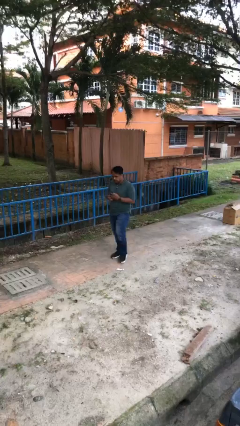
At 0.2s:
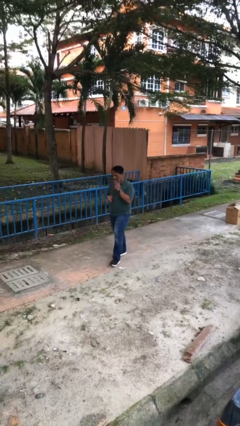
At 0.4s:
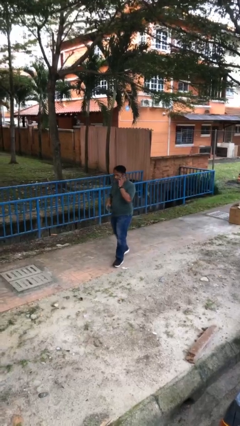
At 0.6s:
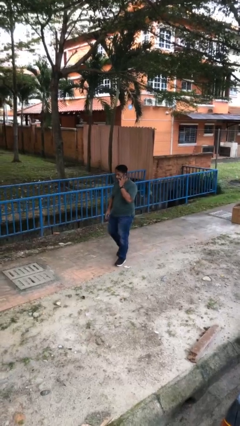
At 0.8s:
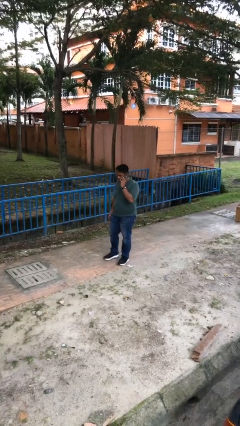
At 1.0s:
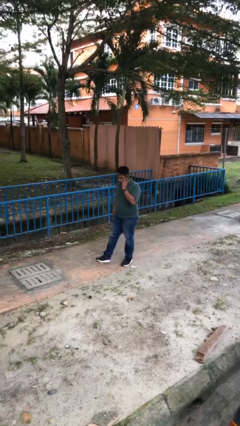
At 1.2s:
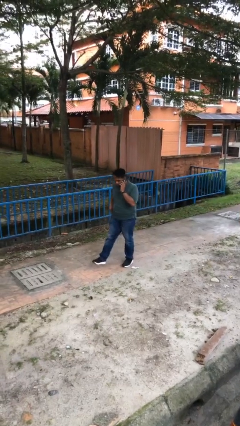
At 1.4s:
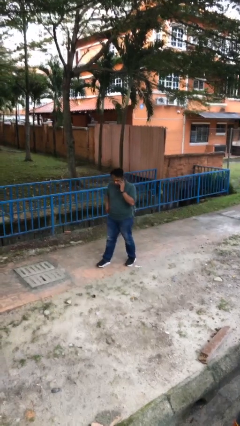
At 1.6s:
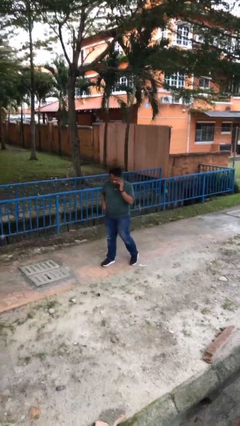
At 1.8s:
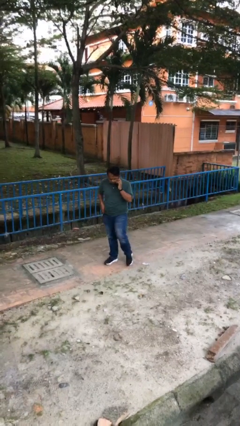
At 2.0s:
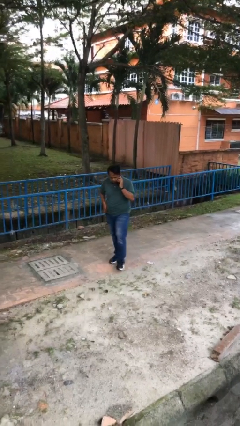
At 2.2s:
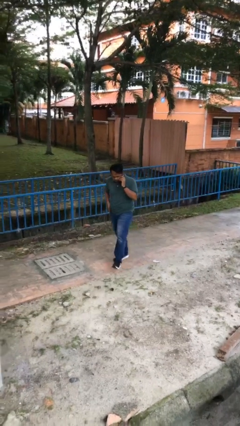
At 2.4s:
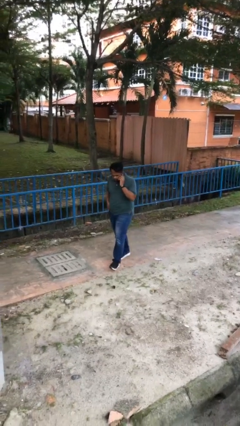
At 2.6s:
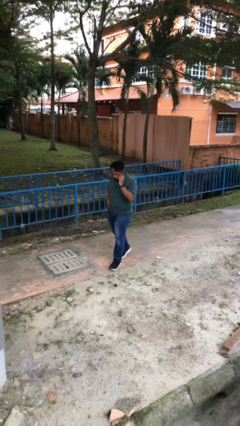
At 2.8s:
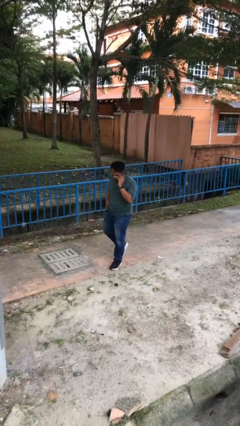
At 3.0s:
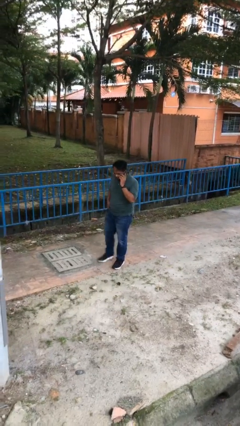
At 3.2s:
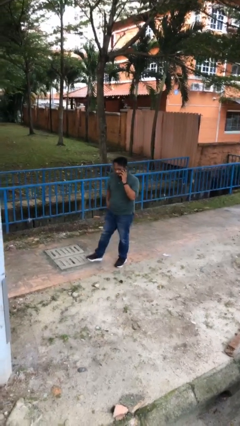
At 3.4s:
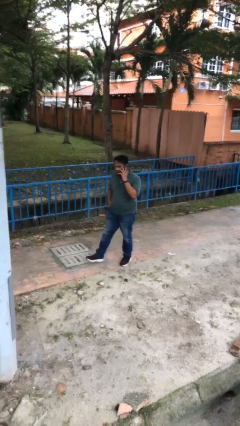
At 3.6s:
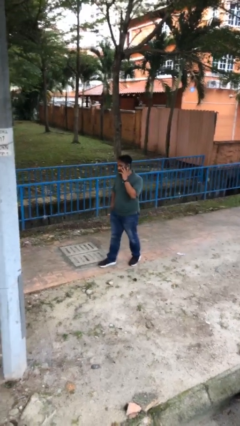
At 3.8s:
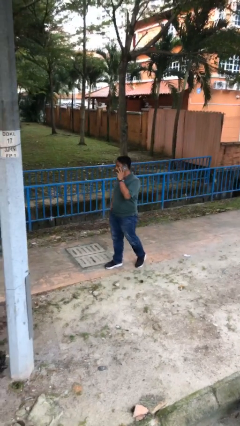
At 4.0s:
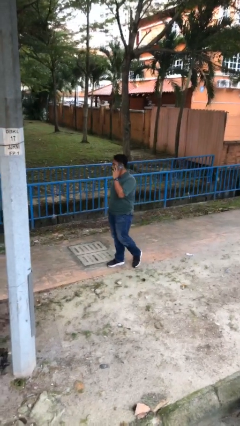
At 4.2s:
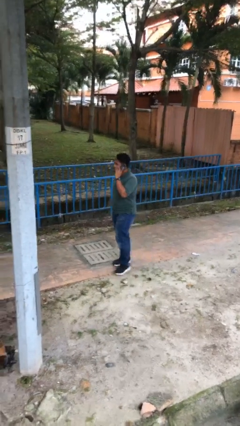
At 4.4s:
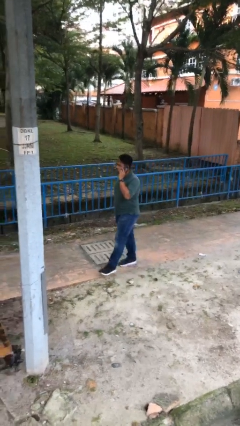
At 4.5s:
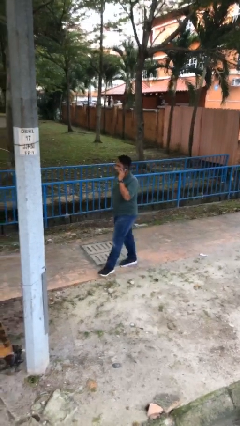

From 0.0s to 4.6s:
person talks on phone

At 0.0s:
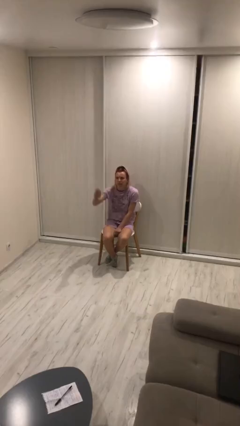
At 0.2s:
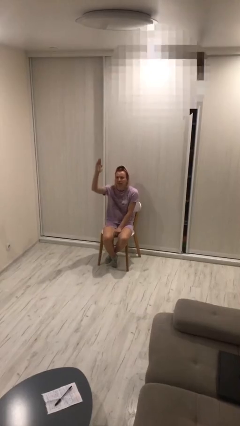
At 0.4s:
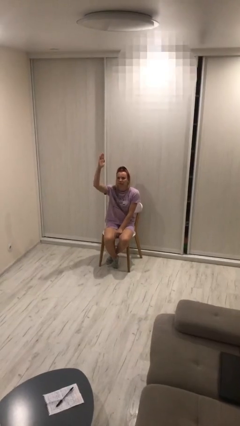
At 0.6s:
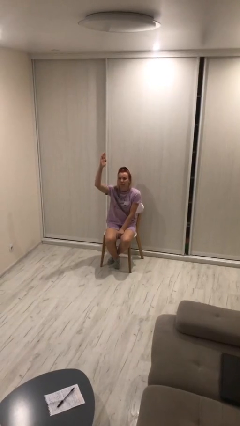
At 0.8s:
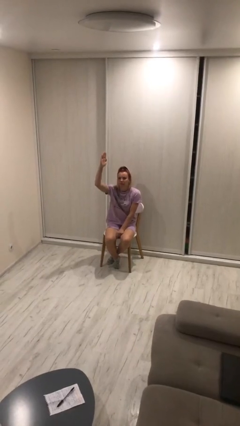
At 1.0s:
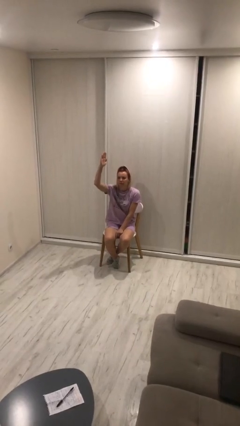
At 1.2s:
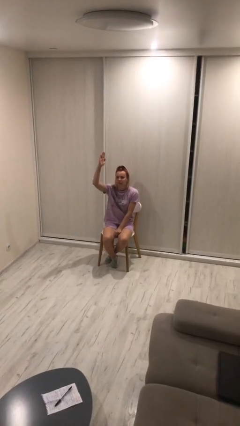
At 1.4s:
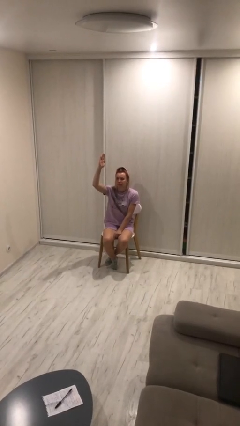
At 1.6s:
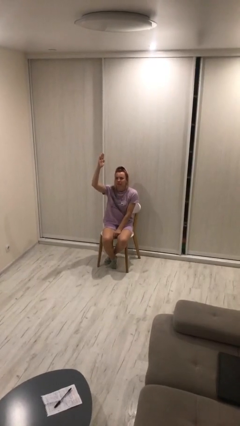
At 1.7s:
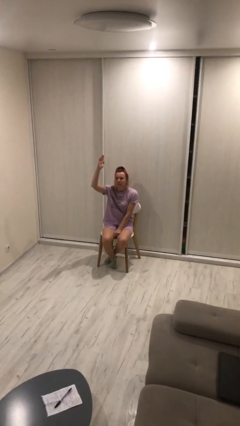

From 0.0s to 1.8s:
person gestures raise hand

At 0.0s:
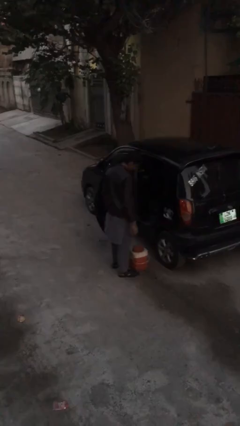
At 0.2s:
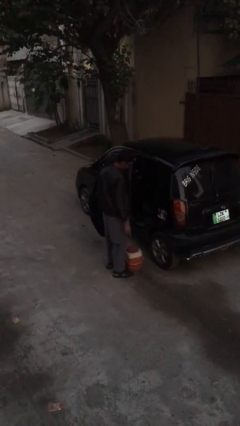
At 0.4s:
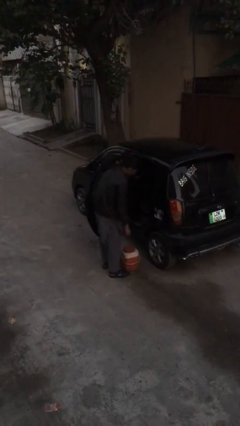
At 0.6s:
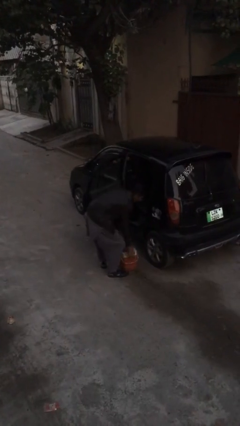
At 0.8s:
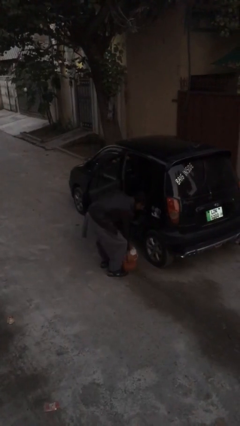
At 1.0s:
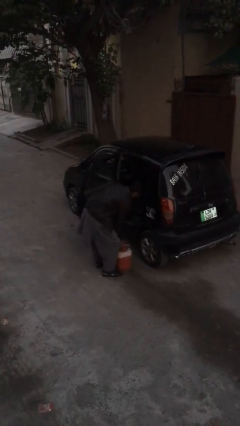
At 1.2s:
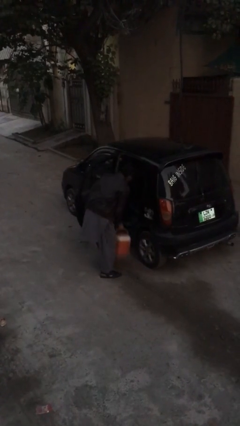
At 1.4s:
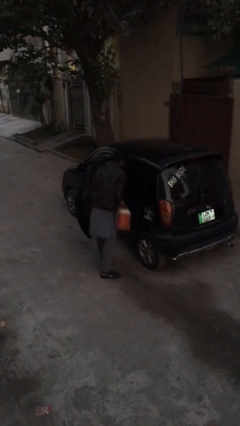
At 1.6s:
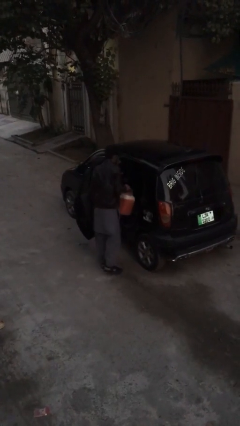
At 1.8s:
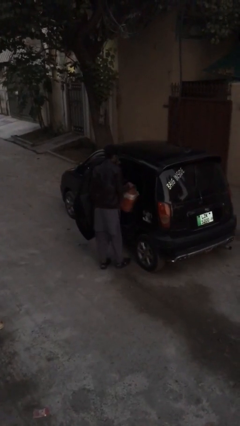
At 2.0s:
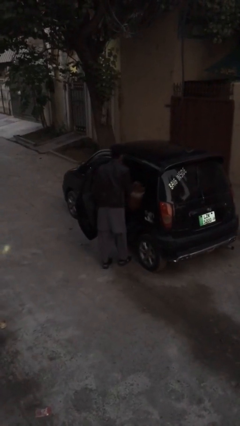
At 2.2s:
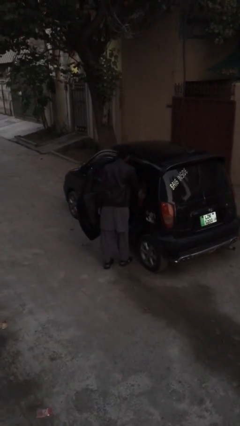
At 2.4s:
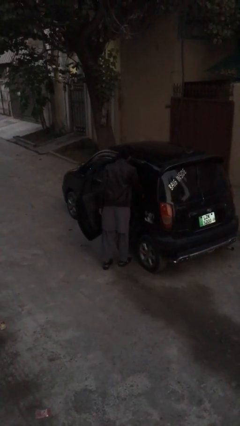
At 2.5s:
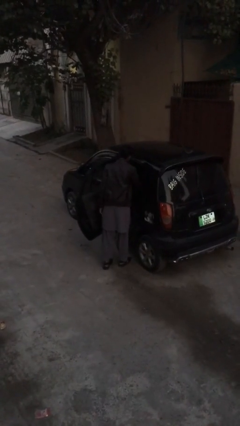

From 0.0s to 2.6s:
person loads car

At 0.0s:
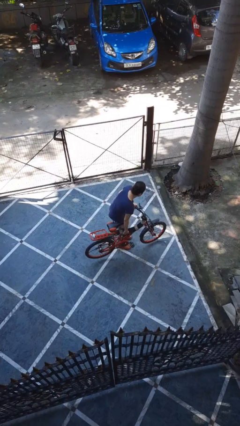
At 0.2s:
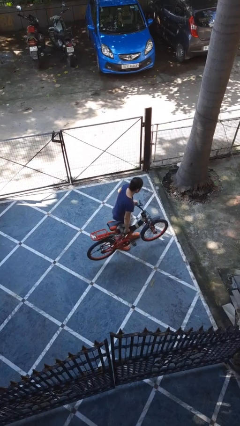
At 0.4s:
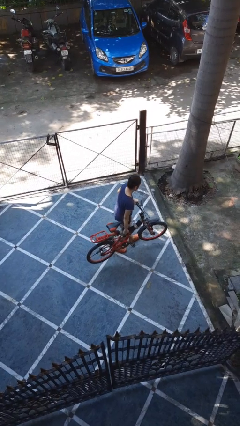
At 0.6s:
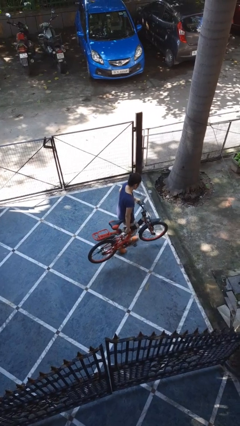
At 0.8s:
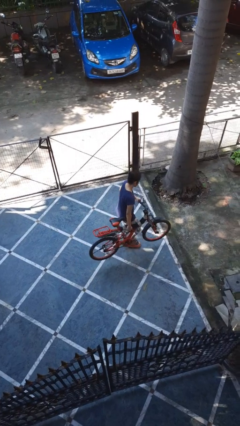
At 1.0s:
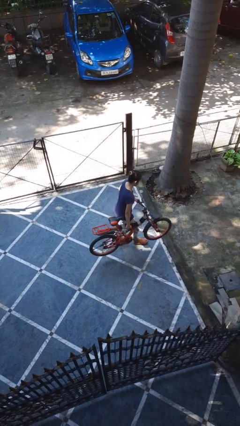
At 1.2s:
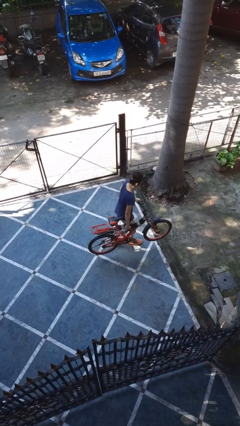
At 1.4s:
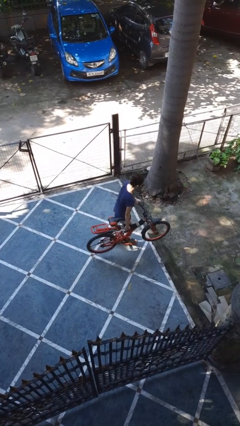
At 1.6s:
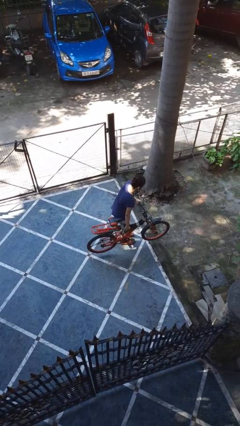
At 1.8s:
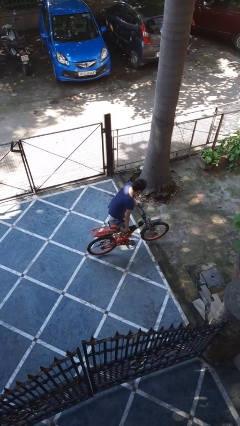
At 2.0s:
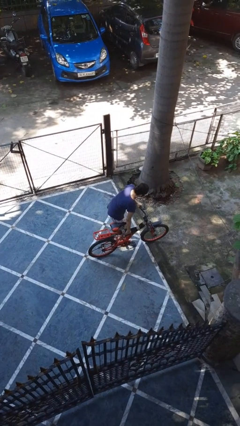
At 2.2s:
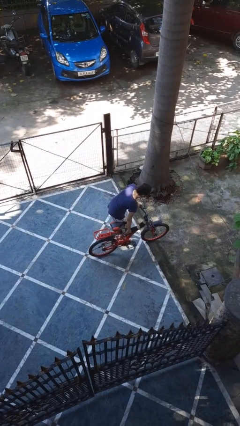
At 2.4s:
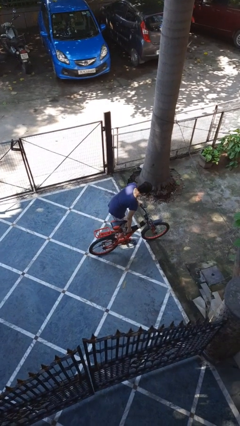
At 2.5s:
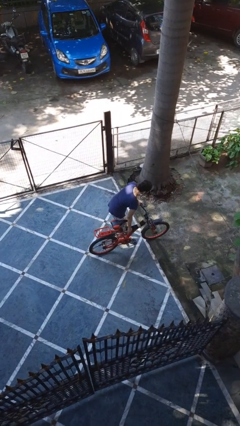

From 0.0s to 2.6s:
person carries bicycle

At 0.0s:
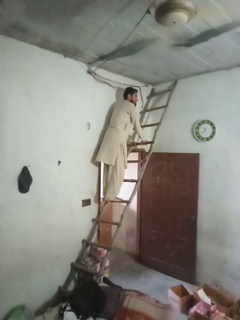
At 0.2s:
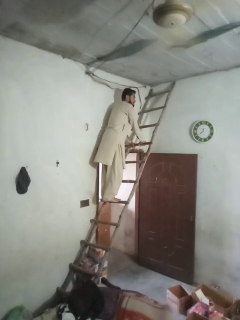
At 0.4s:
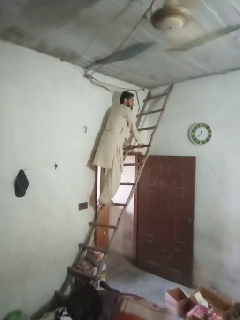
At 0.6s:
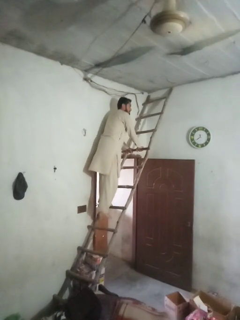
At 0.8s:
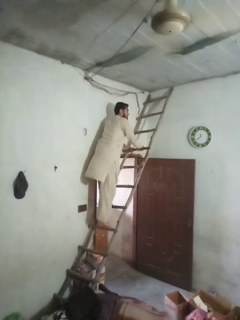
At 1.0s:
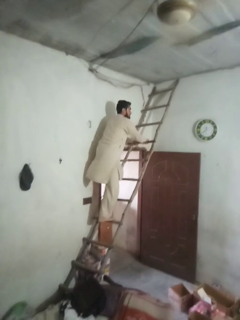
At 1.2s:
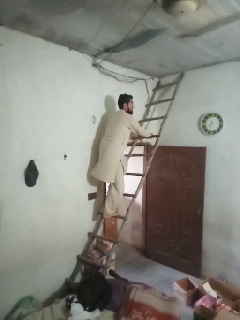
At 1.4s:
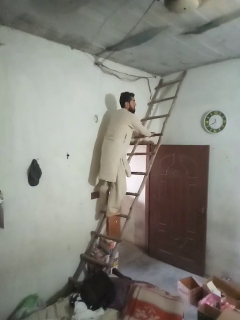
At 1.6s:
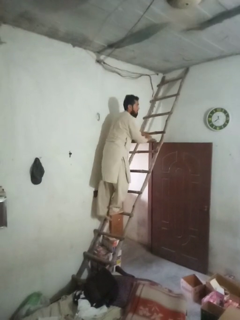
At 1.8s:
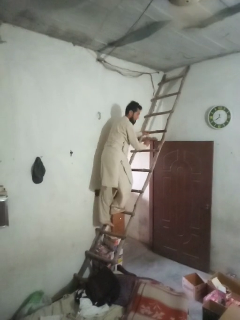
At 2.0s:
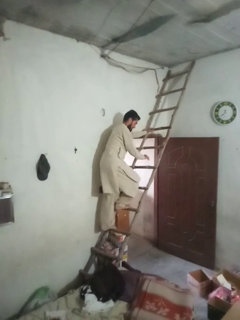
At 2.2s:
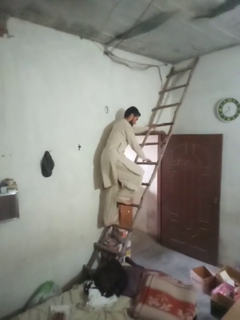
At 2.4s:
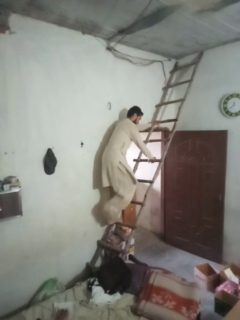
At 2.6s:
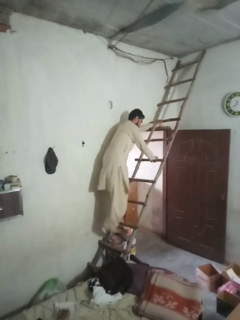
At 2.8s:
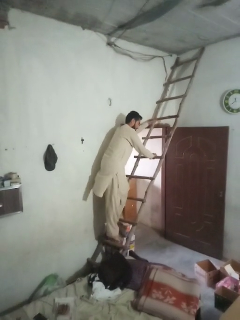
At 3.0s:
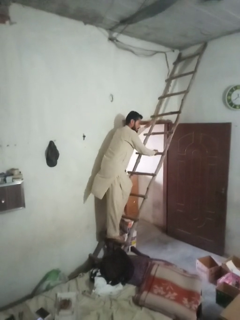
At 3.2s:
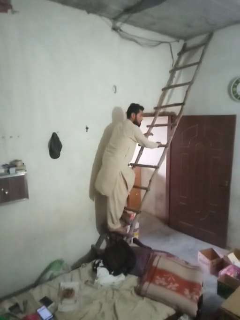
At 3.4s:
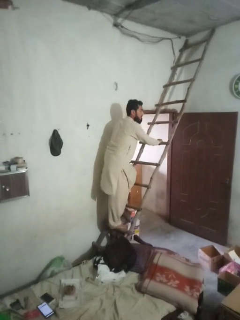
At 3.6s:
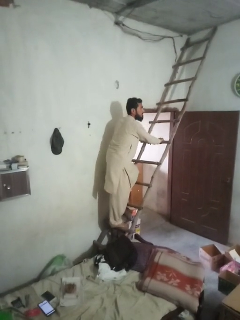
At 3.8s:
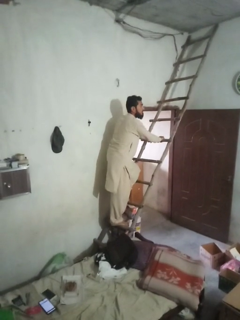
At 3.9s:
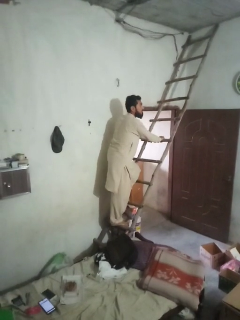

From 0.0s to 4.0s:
person climbs down ladder

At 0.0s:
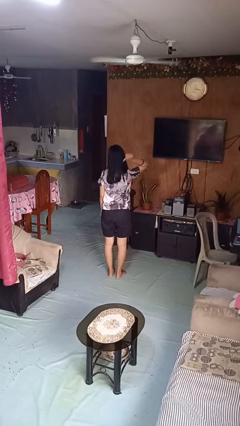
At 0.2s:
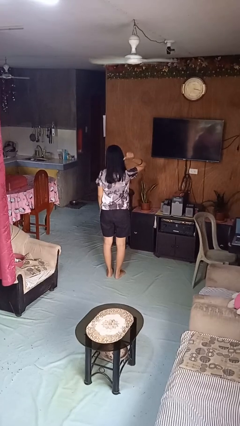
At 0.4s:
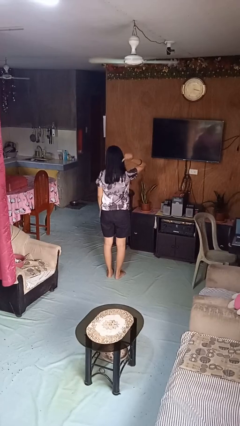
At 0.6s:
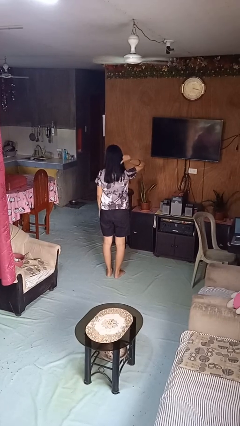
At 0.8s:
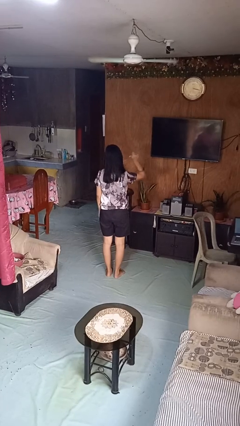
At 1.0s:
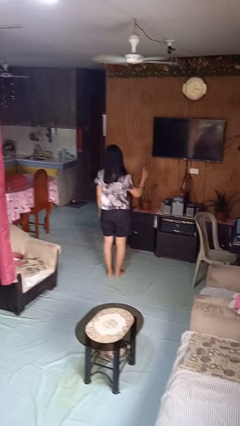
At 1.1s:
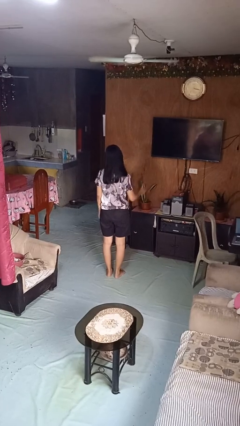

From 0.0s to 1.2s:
person gestures behind me

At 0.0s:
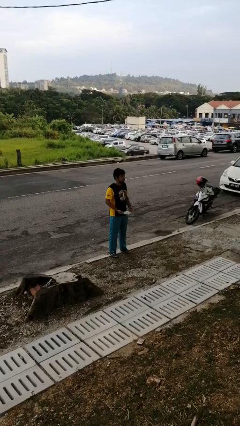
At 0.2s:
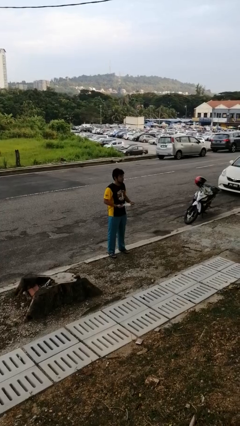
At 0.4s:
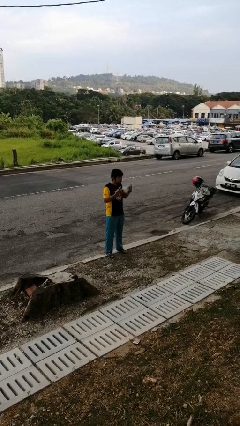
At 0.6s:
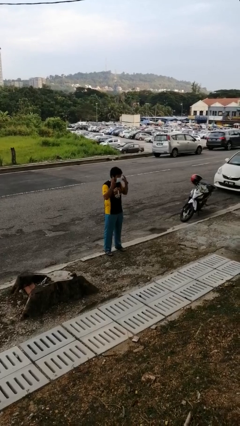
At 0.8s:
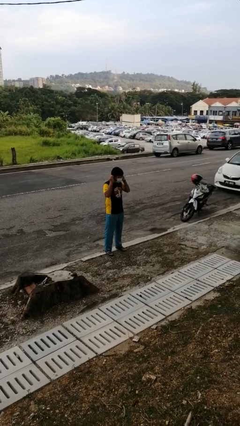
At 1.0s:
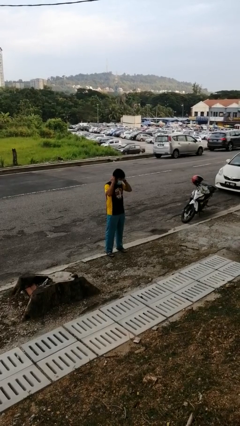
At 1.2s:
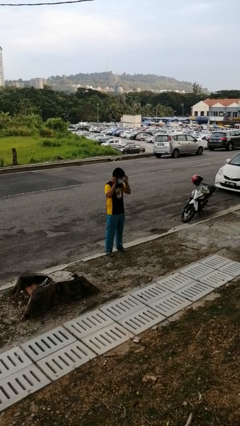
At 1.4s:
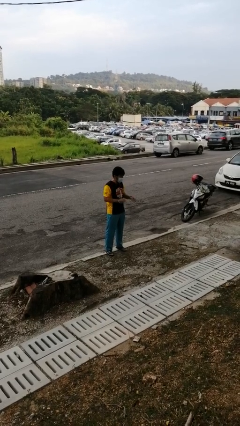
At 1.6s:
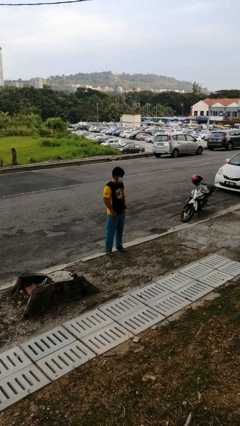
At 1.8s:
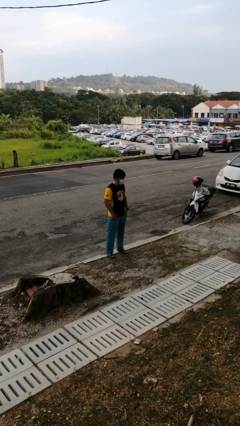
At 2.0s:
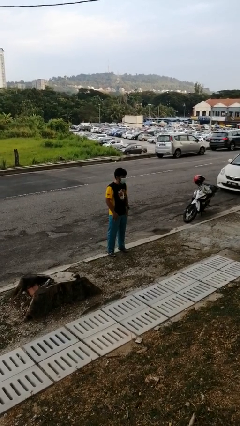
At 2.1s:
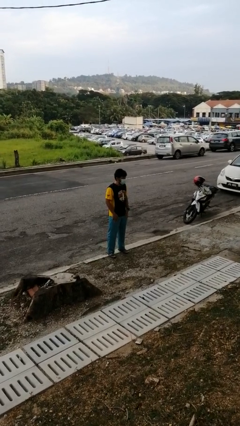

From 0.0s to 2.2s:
person puts on facemask
